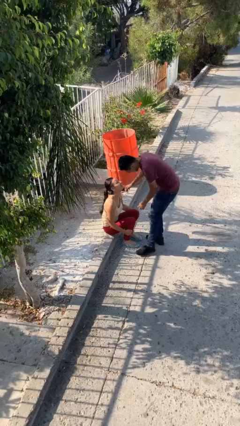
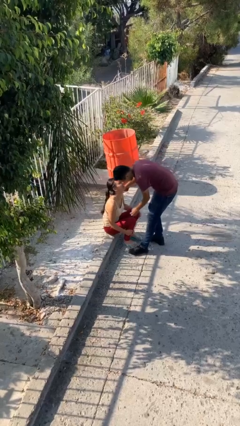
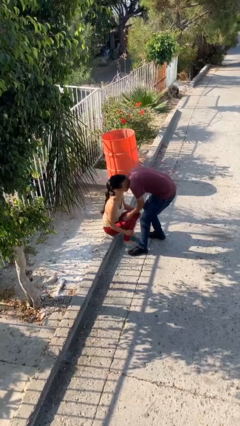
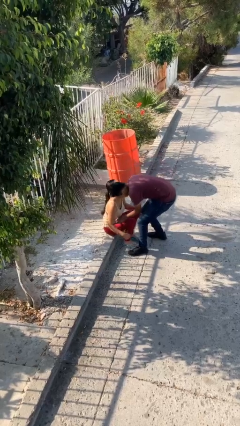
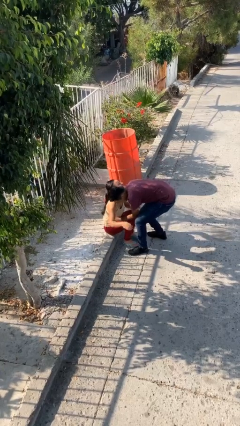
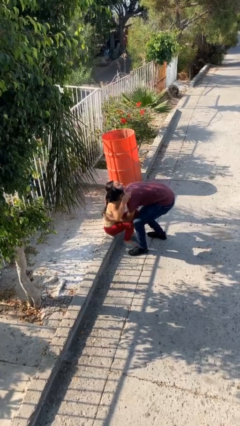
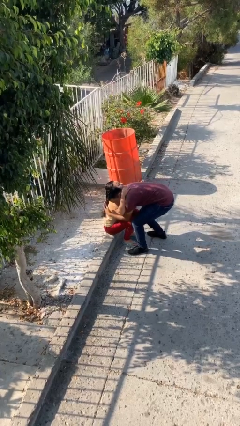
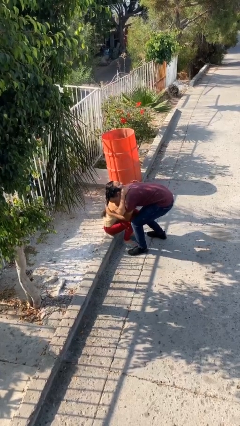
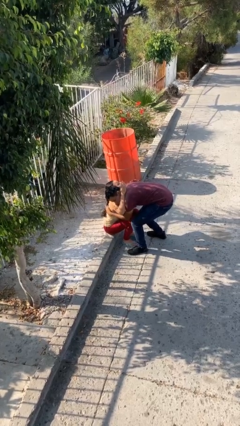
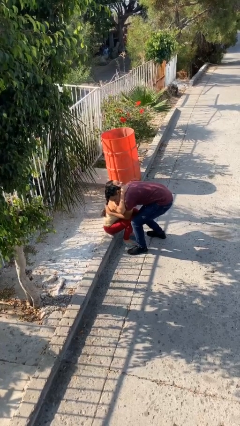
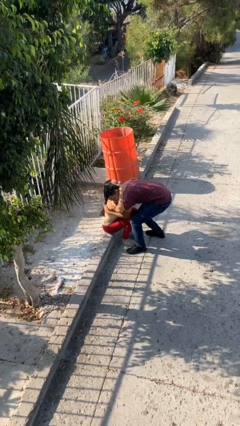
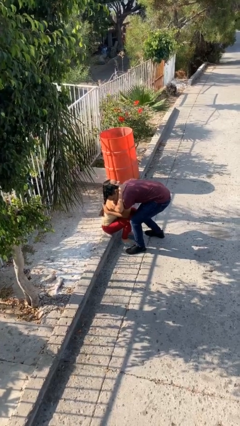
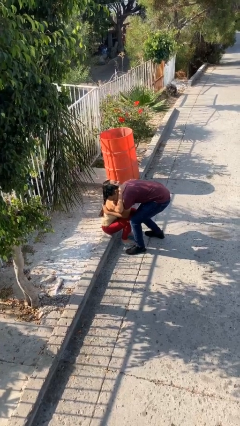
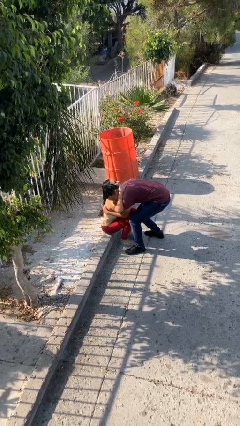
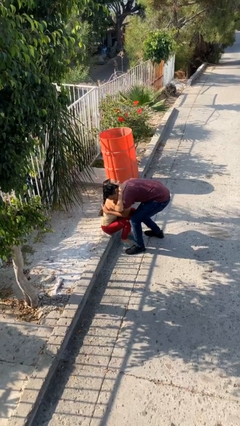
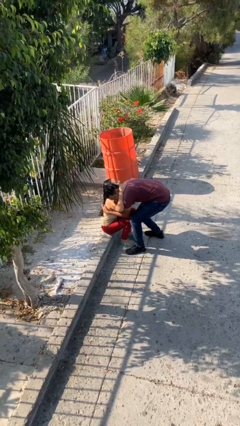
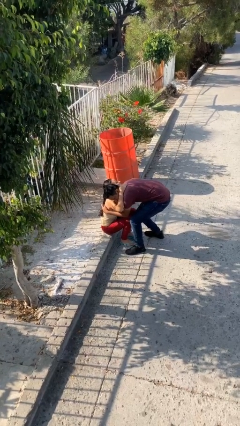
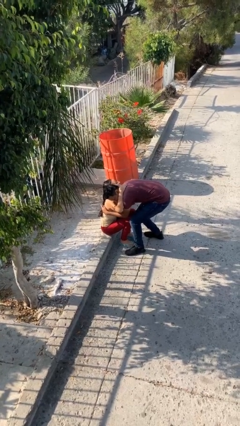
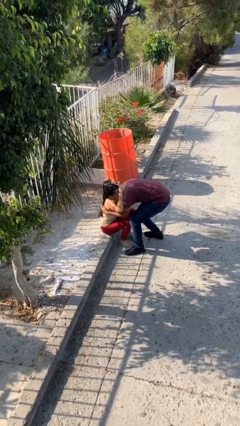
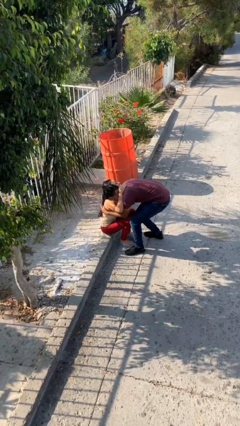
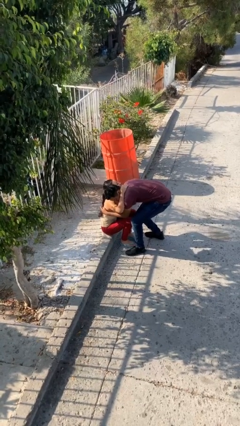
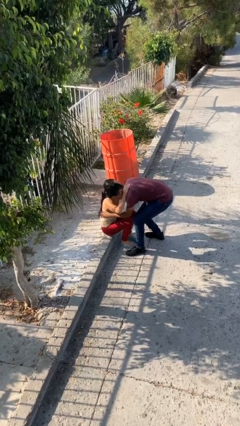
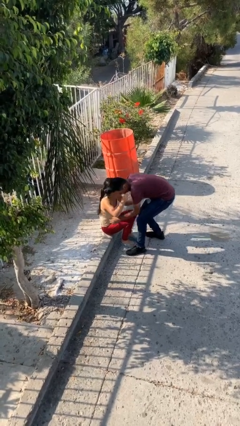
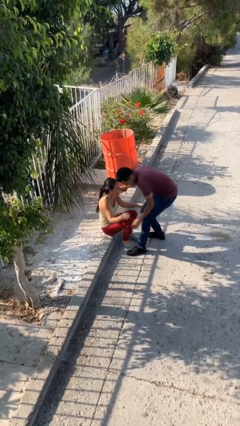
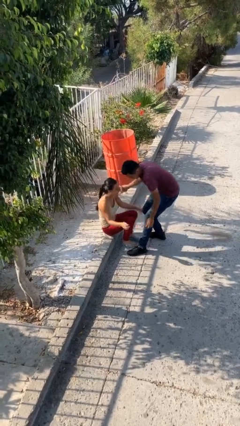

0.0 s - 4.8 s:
person embraces person

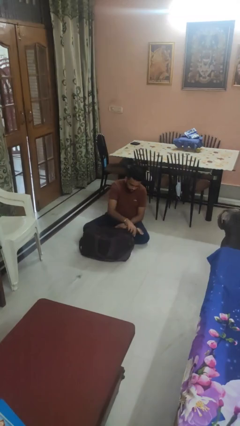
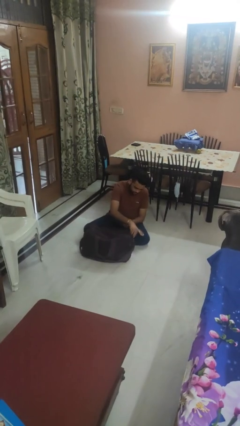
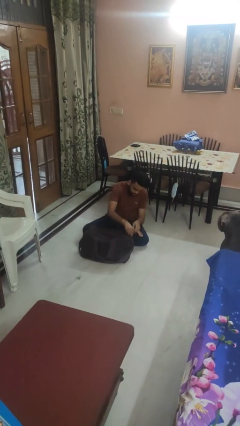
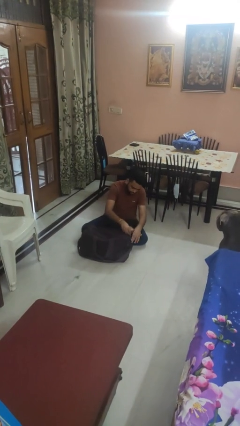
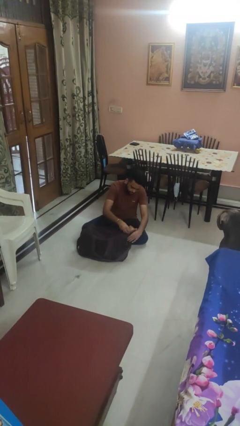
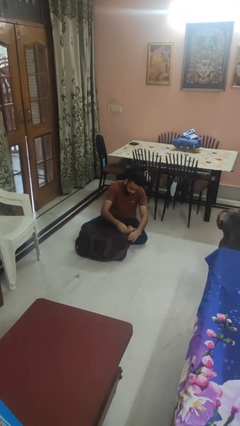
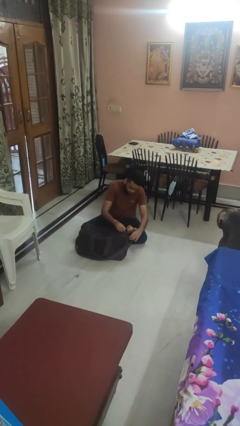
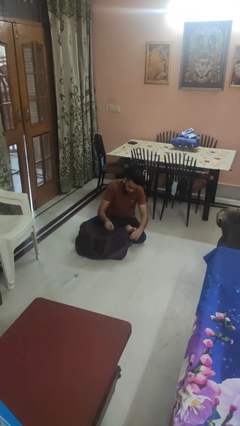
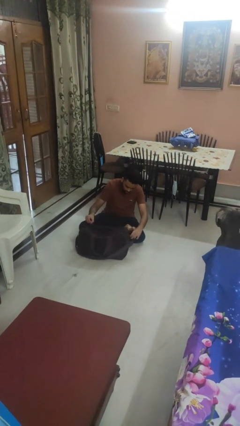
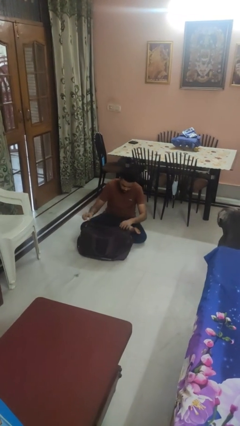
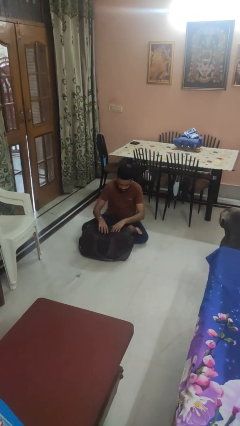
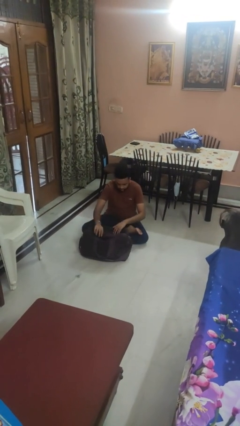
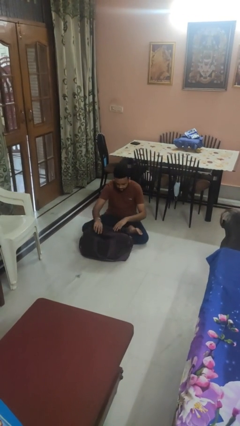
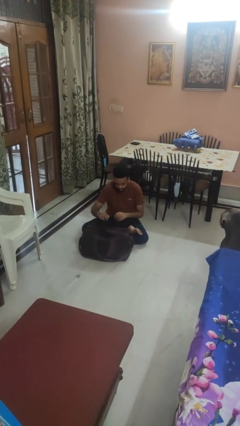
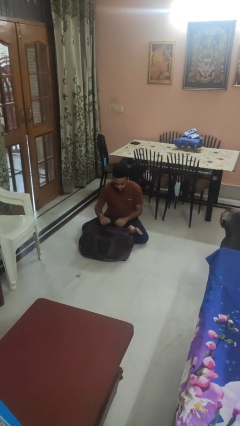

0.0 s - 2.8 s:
person opens suitcase

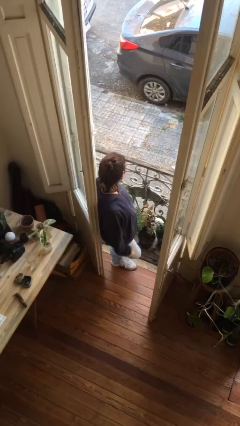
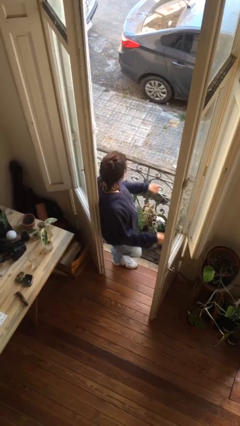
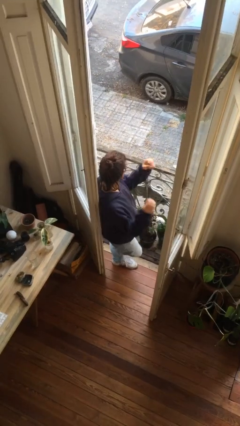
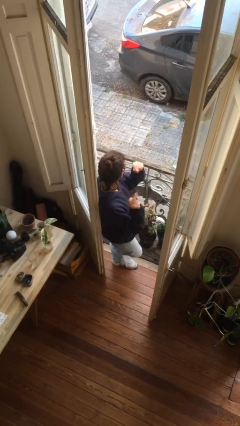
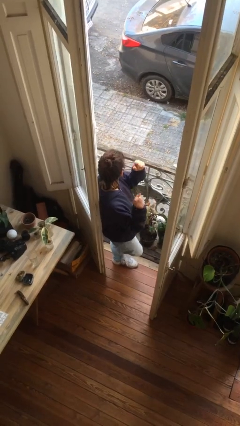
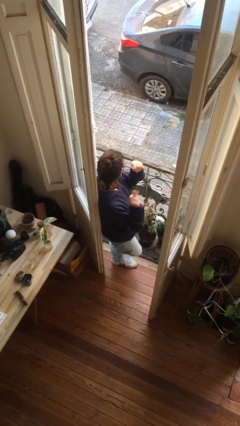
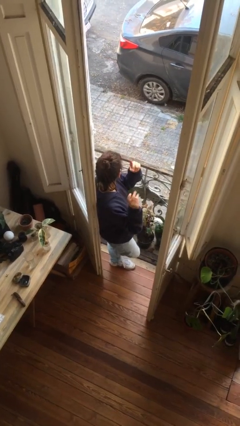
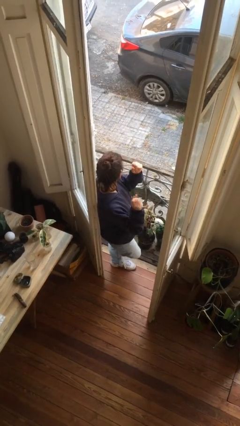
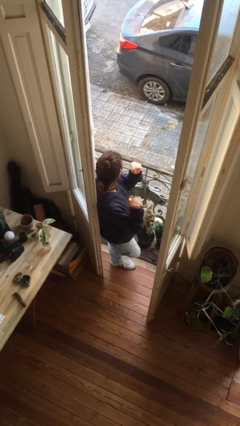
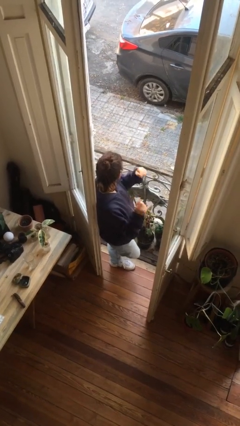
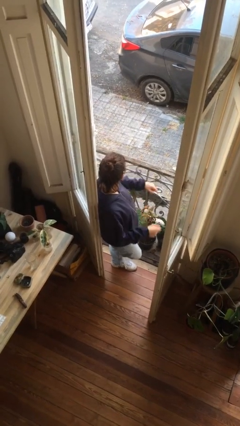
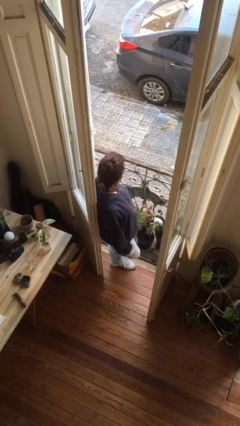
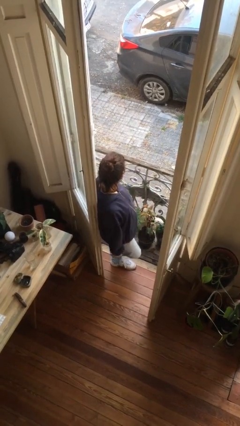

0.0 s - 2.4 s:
person snaps fingers

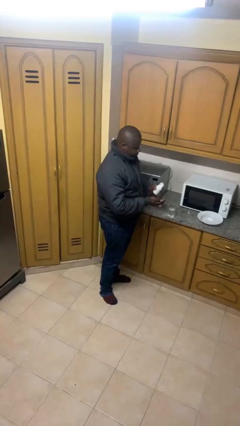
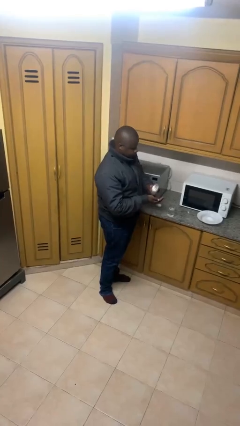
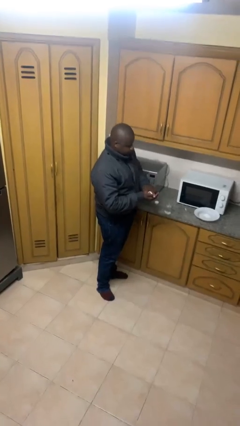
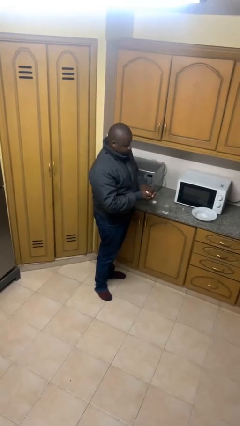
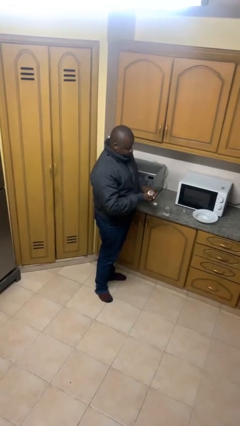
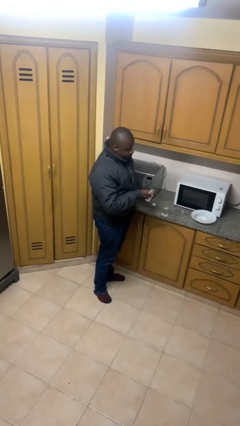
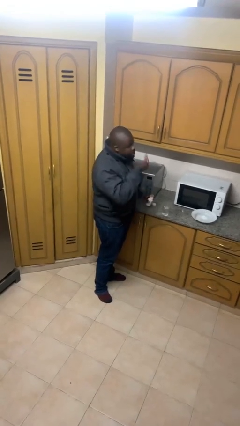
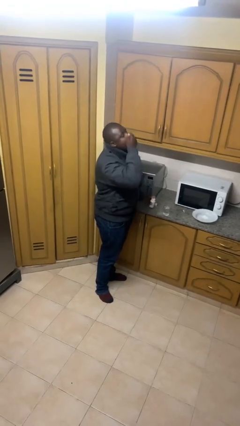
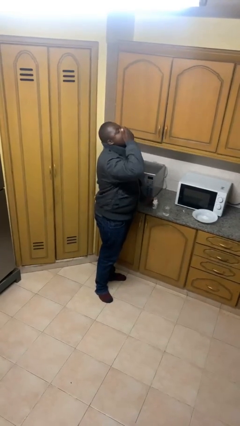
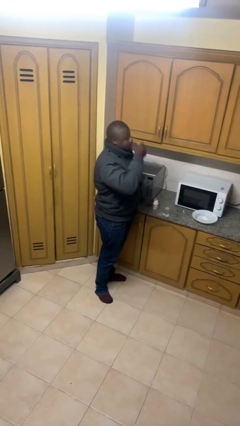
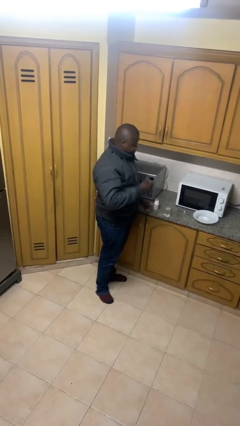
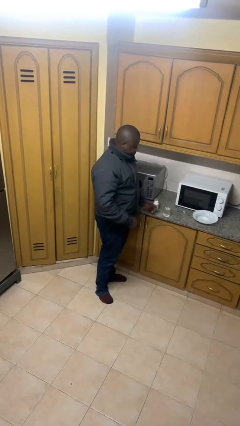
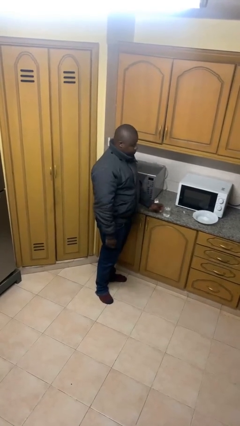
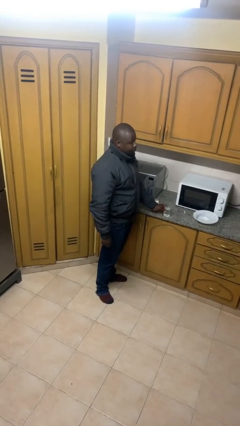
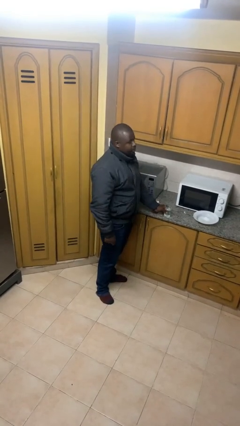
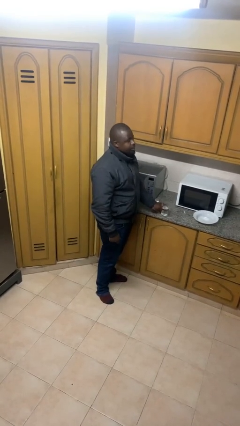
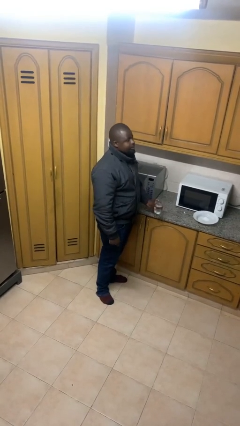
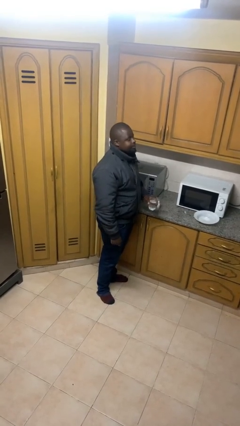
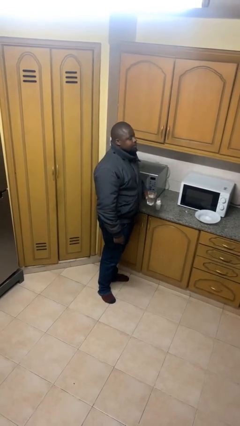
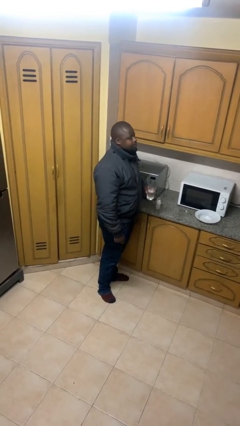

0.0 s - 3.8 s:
person takes medicine pills

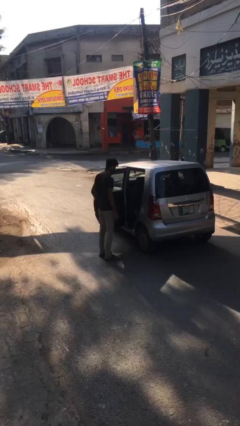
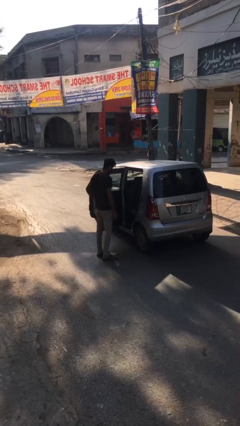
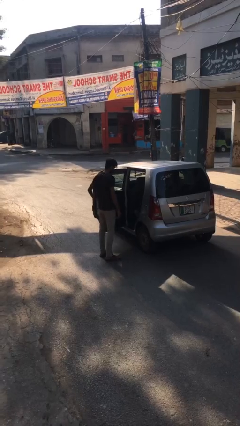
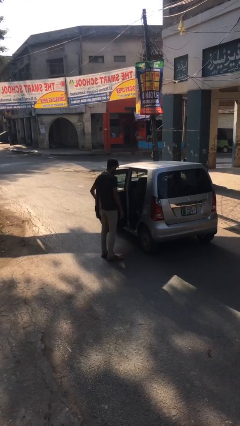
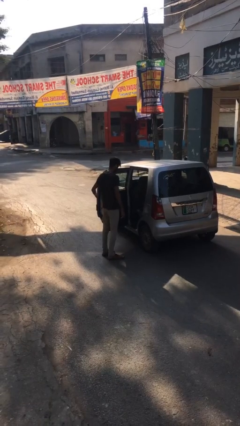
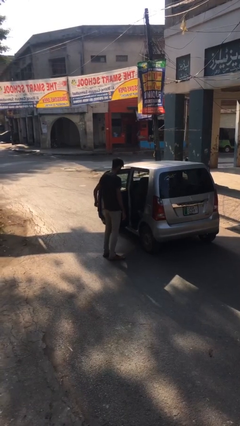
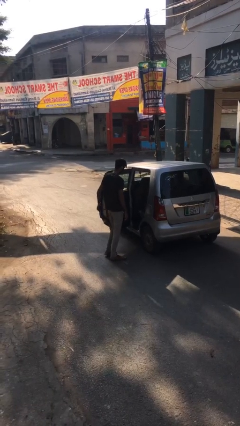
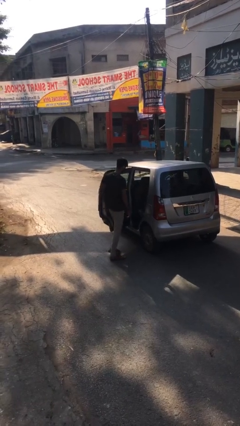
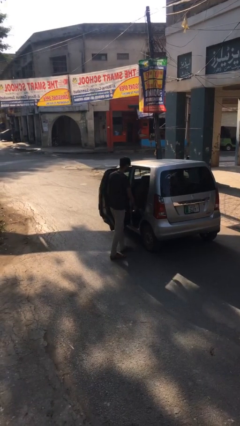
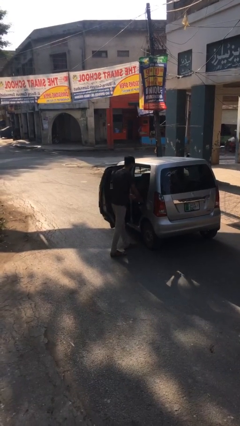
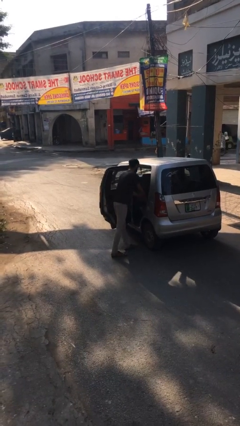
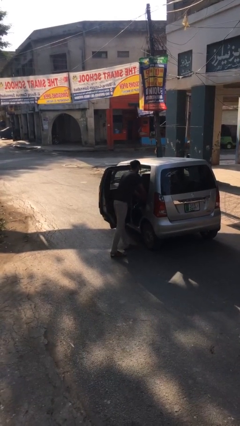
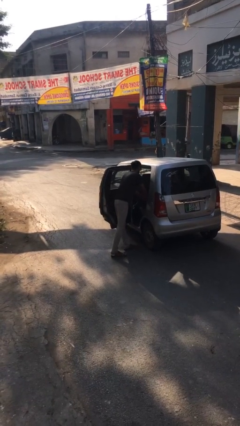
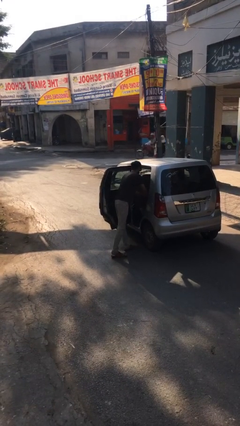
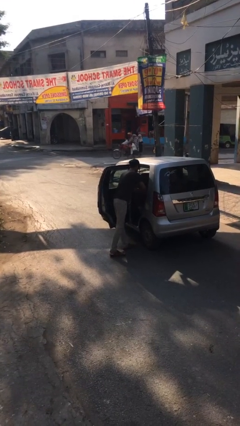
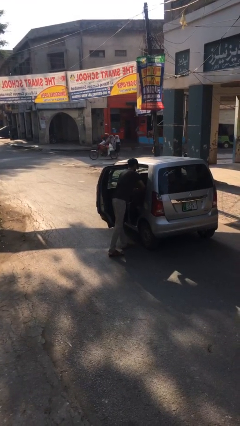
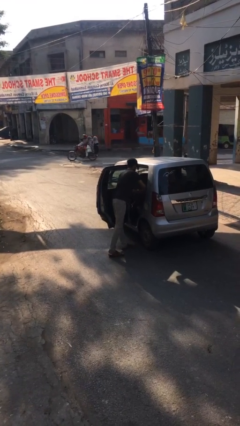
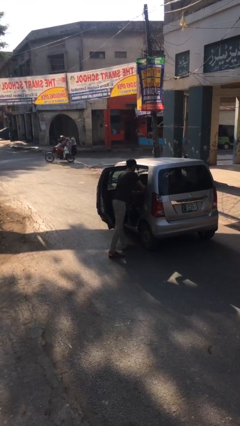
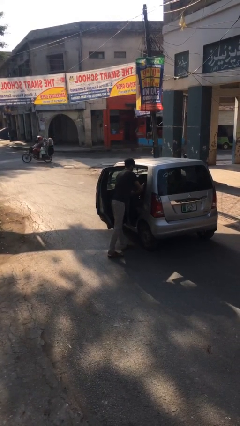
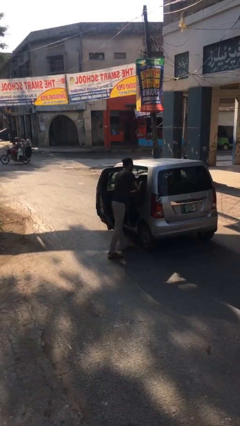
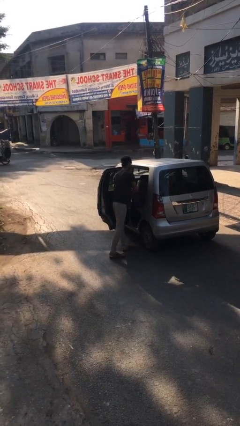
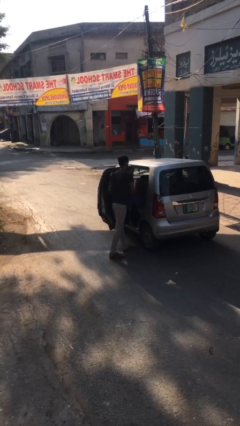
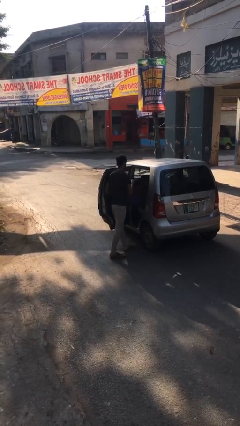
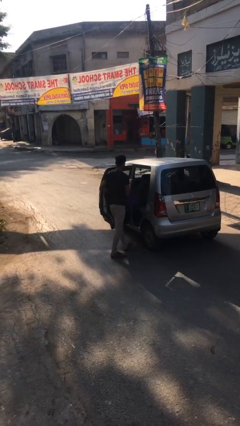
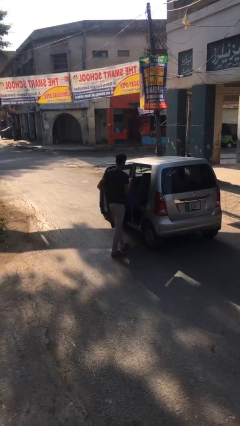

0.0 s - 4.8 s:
person unloads car
